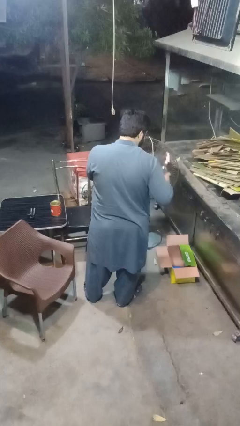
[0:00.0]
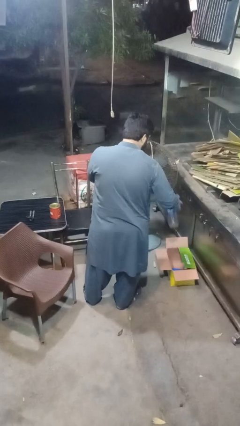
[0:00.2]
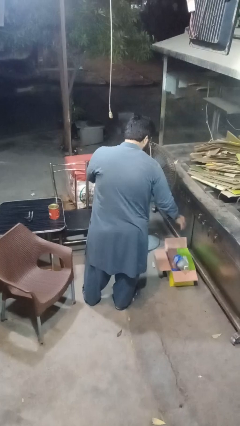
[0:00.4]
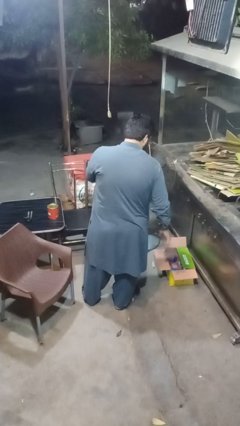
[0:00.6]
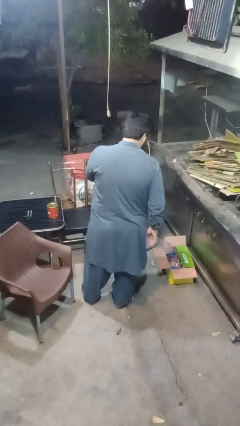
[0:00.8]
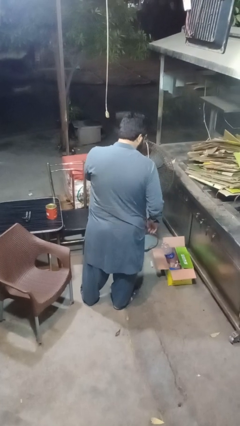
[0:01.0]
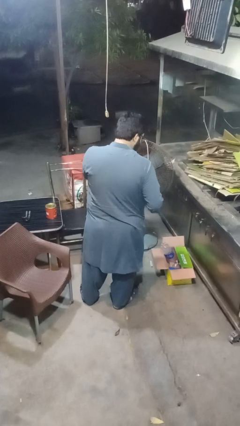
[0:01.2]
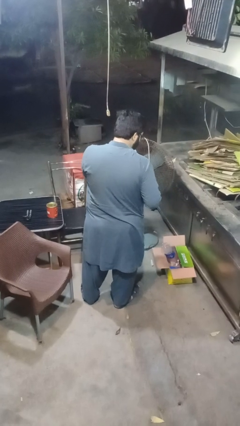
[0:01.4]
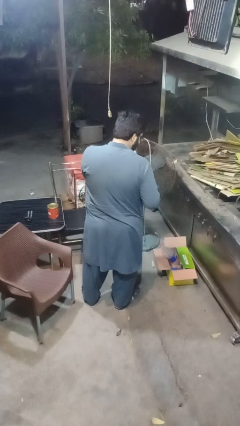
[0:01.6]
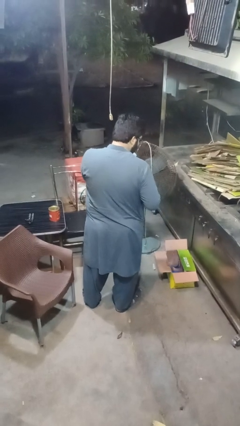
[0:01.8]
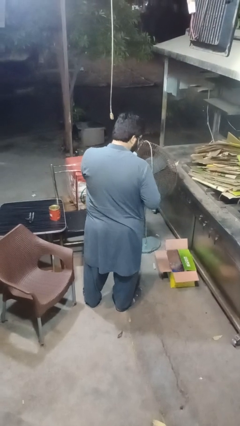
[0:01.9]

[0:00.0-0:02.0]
person discards trash

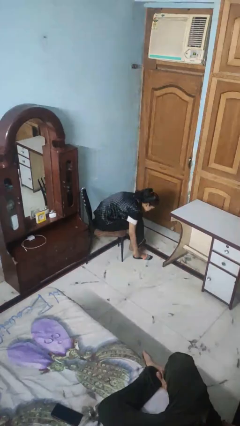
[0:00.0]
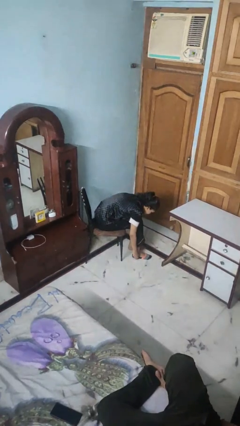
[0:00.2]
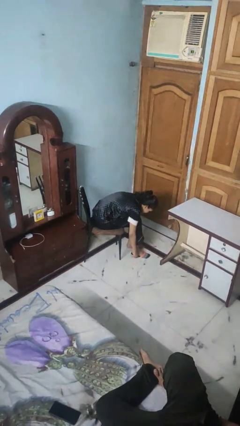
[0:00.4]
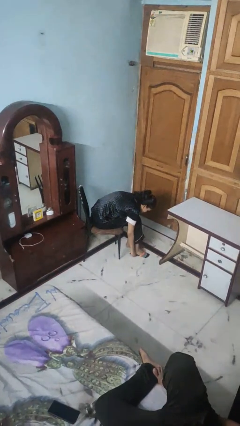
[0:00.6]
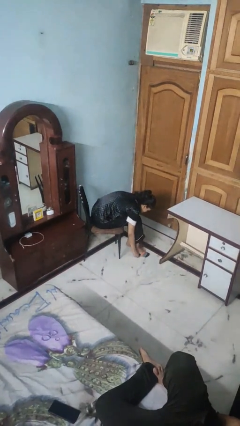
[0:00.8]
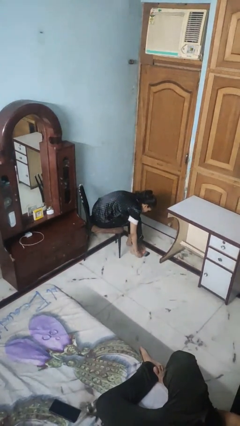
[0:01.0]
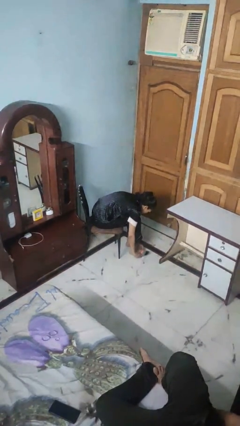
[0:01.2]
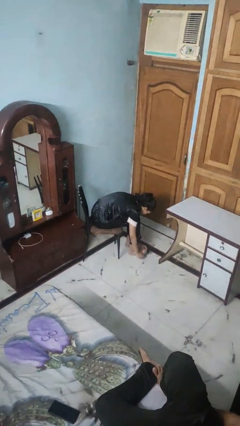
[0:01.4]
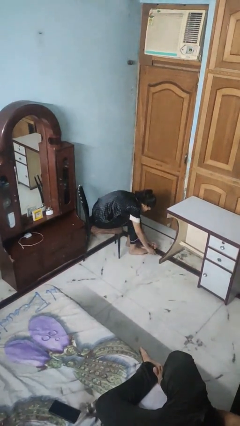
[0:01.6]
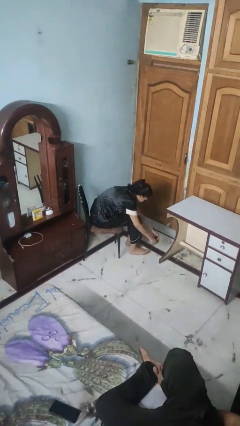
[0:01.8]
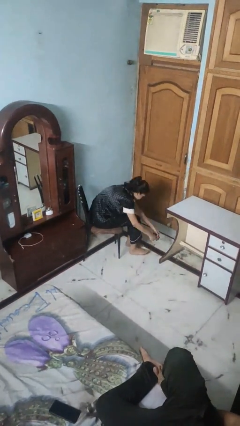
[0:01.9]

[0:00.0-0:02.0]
person takes off socks

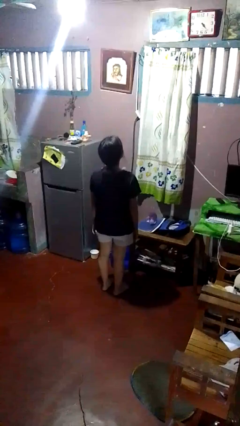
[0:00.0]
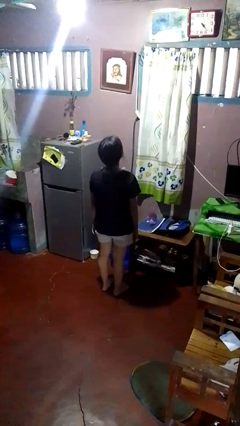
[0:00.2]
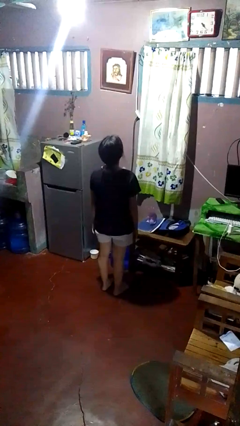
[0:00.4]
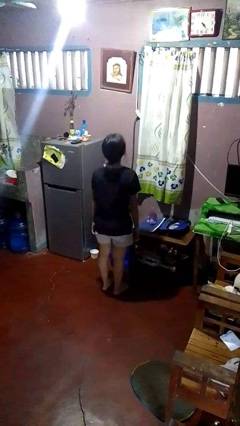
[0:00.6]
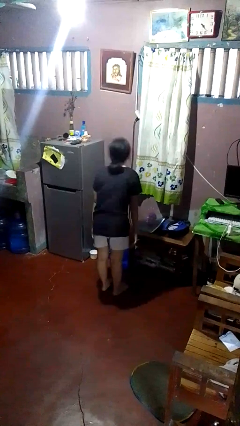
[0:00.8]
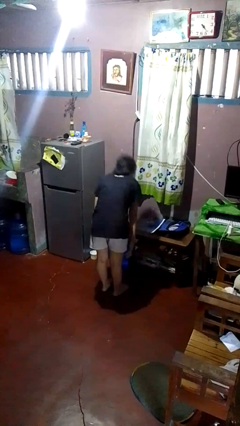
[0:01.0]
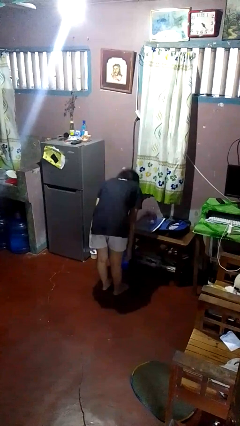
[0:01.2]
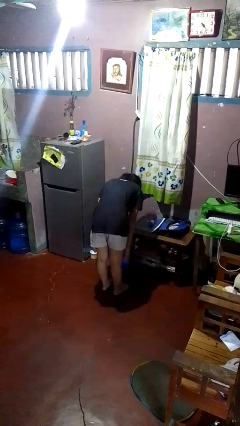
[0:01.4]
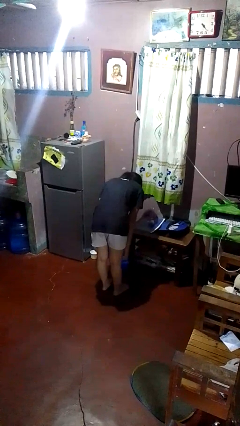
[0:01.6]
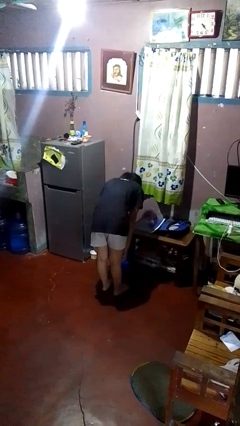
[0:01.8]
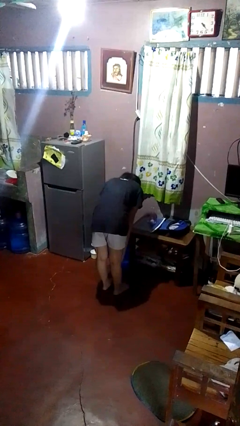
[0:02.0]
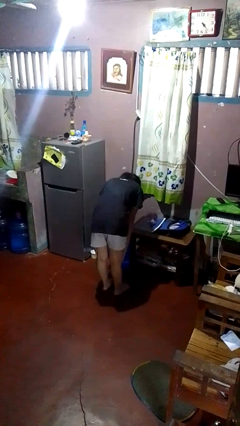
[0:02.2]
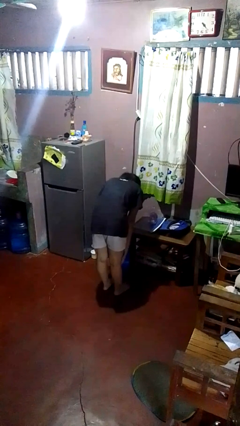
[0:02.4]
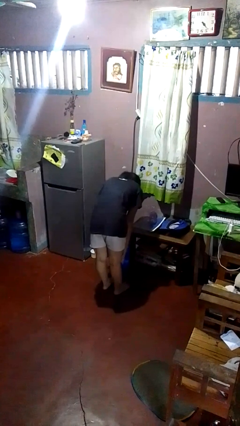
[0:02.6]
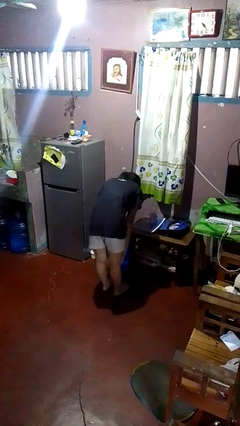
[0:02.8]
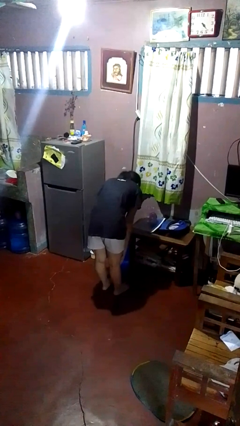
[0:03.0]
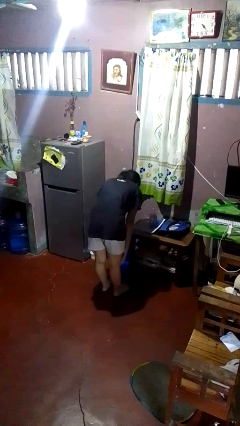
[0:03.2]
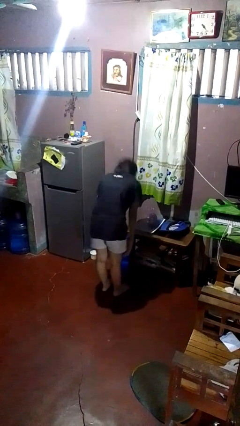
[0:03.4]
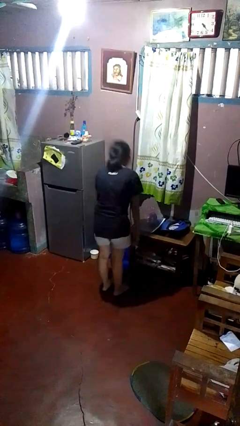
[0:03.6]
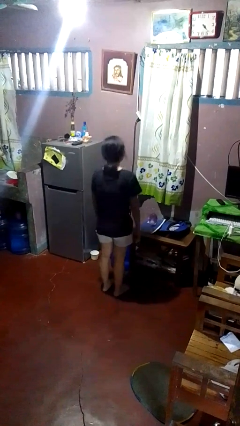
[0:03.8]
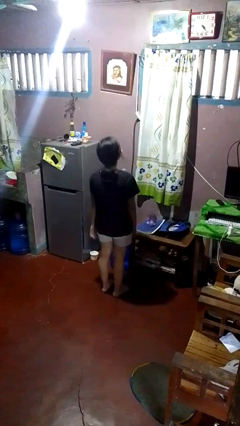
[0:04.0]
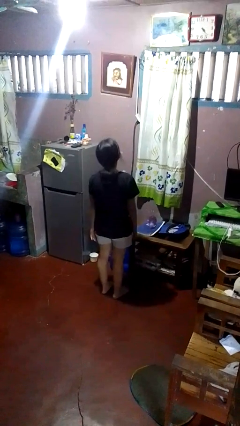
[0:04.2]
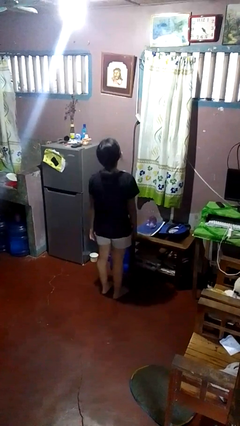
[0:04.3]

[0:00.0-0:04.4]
person bows

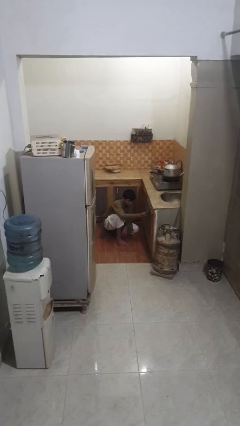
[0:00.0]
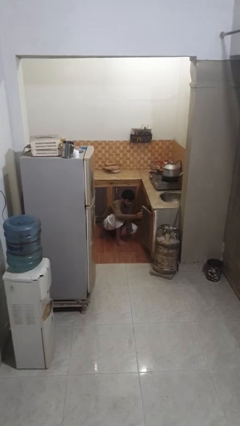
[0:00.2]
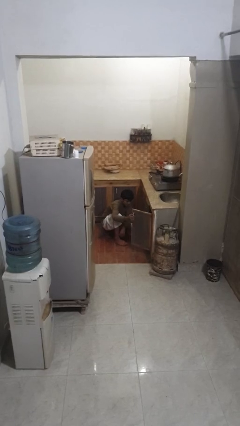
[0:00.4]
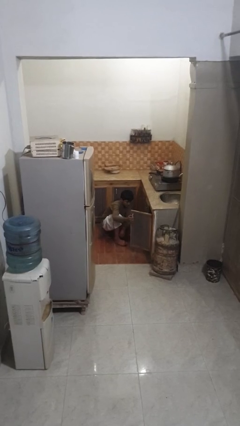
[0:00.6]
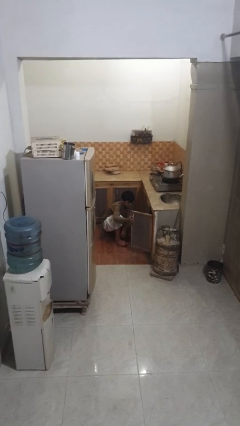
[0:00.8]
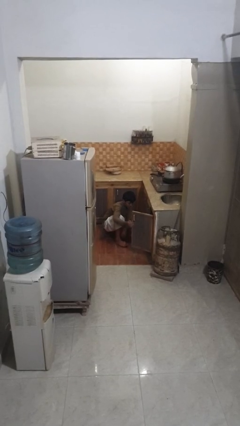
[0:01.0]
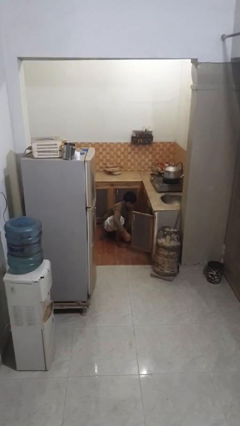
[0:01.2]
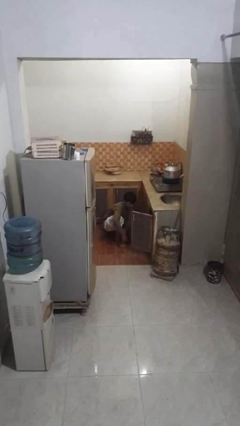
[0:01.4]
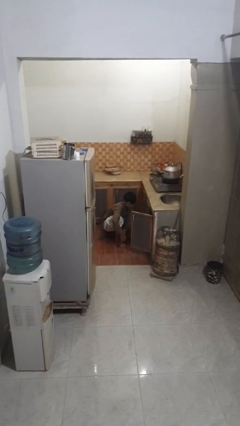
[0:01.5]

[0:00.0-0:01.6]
person opens kitchen drawer

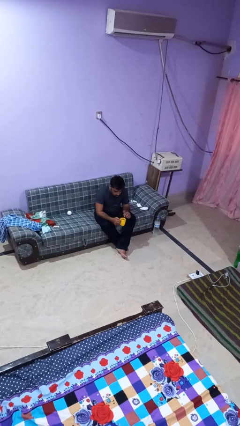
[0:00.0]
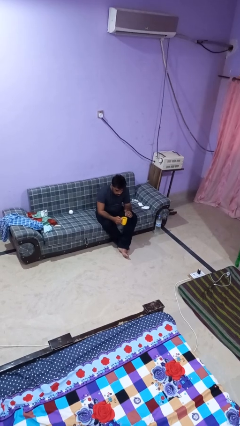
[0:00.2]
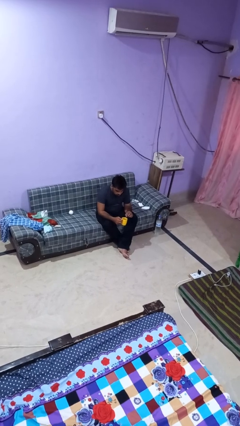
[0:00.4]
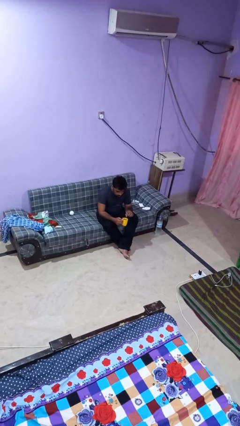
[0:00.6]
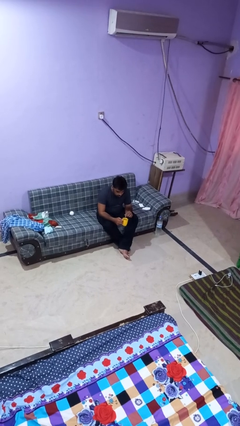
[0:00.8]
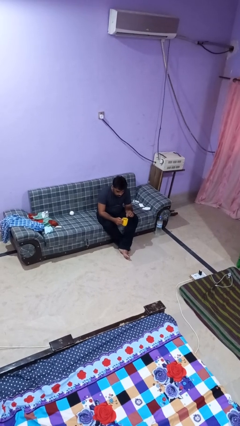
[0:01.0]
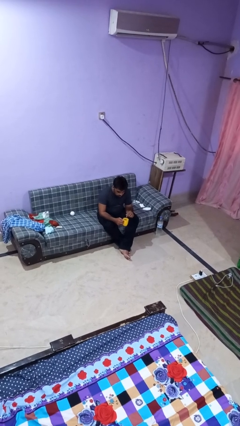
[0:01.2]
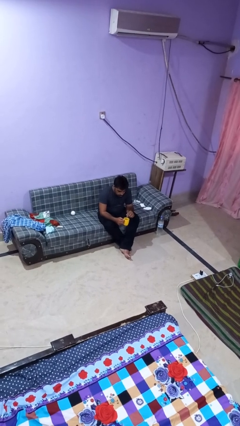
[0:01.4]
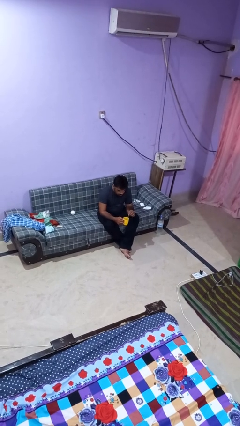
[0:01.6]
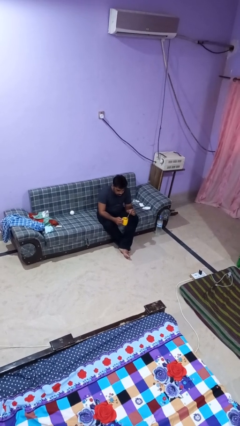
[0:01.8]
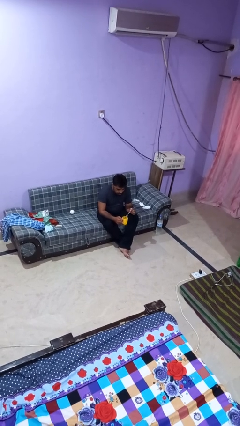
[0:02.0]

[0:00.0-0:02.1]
person stirs mug

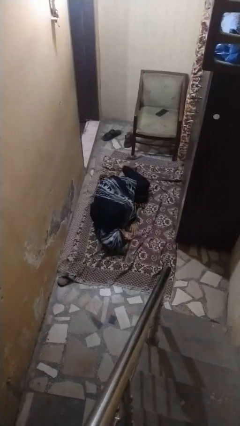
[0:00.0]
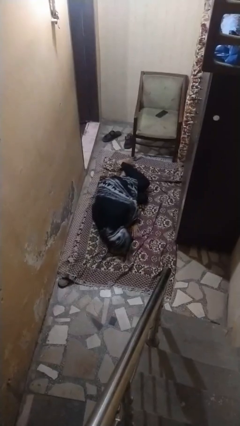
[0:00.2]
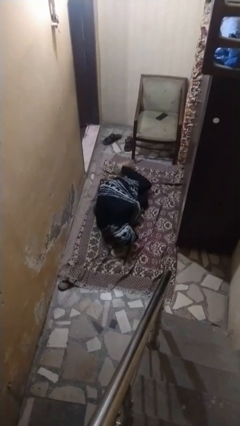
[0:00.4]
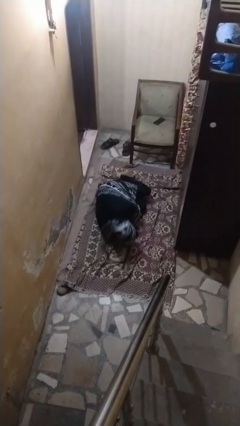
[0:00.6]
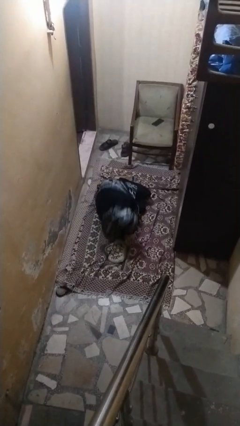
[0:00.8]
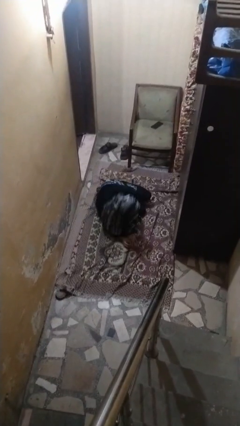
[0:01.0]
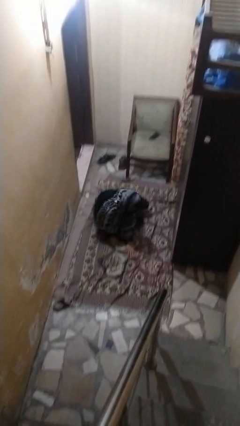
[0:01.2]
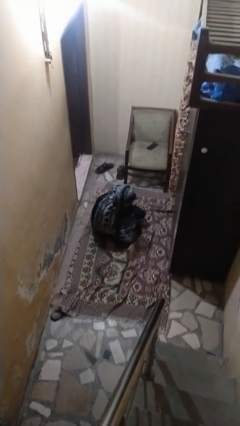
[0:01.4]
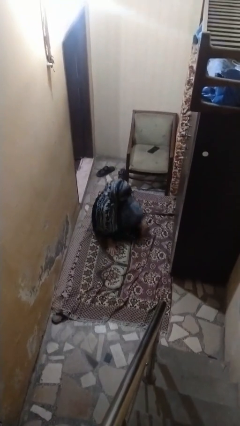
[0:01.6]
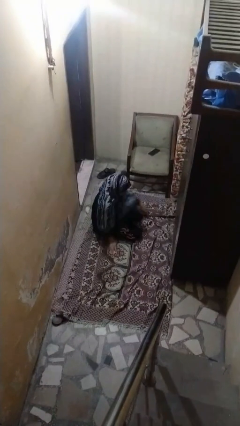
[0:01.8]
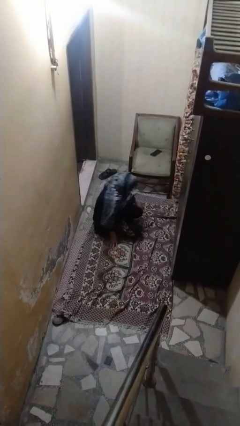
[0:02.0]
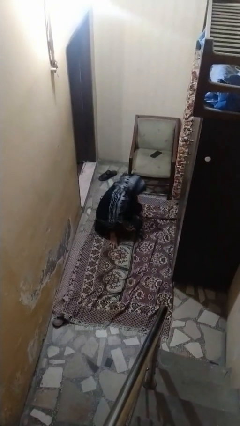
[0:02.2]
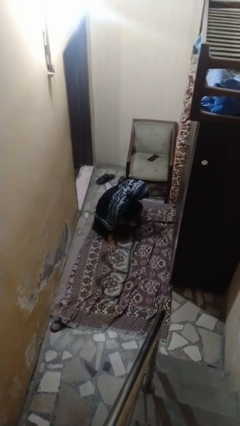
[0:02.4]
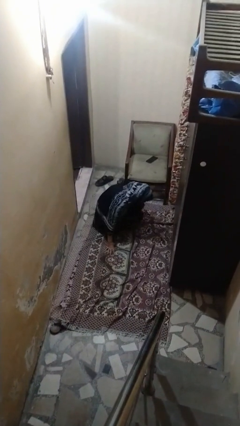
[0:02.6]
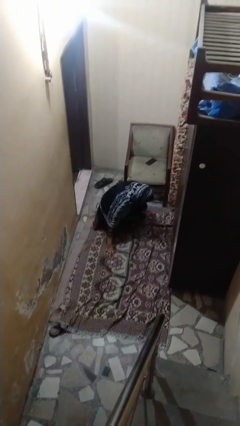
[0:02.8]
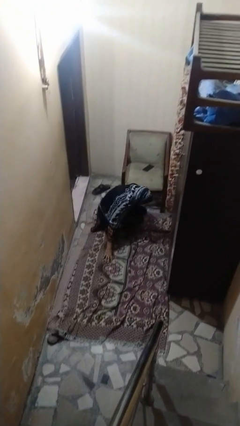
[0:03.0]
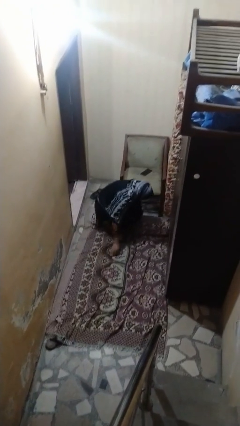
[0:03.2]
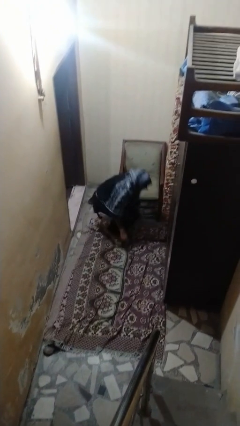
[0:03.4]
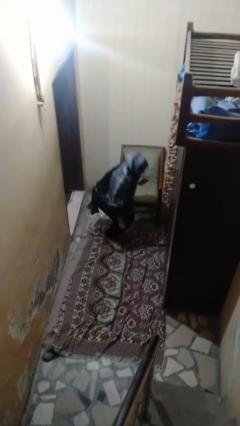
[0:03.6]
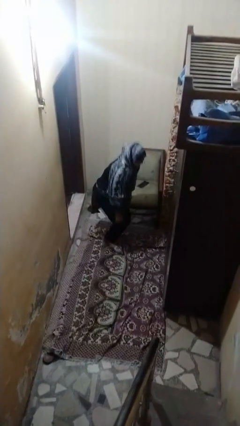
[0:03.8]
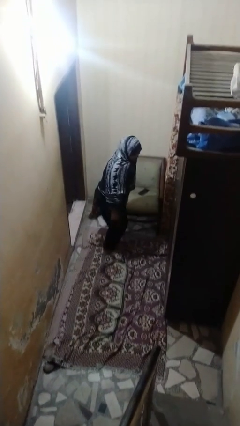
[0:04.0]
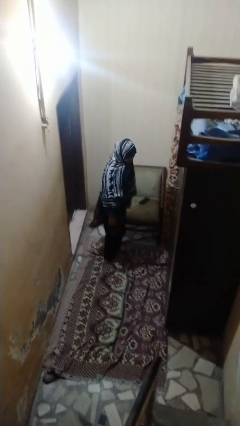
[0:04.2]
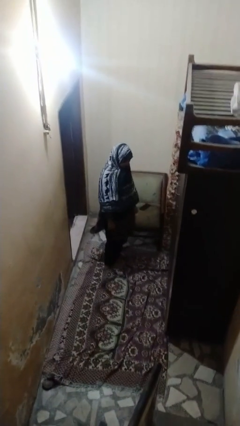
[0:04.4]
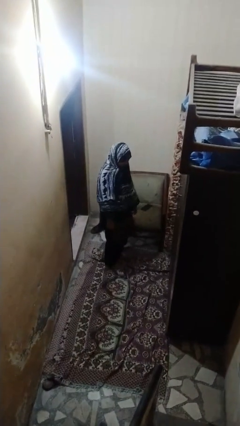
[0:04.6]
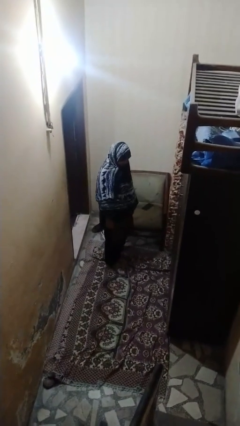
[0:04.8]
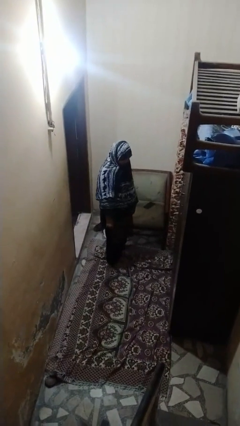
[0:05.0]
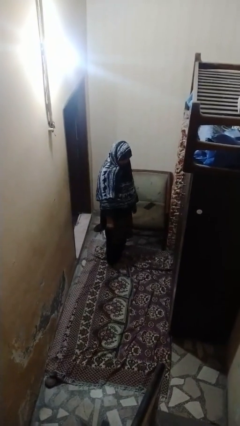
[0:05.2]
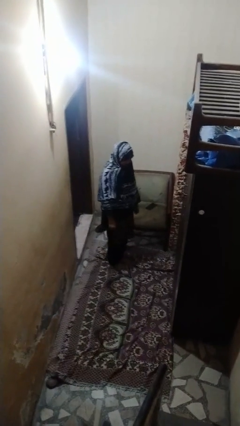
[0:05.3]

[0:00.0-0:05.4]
person stands up from floor
